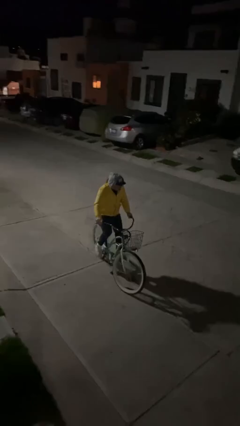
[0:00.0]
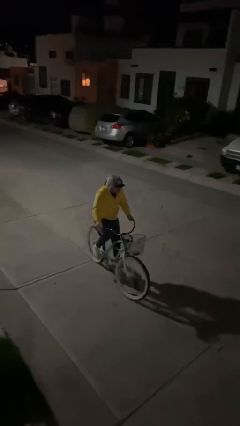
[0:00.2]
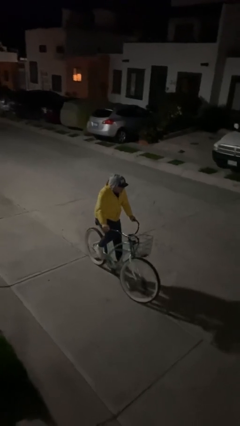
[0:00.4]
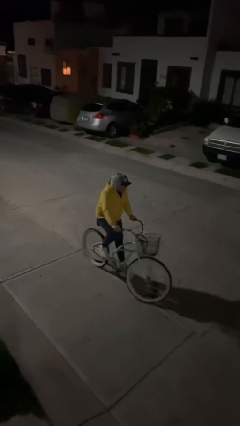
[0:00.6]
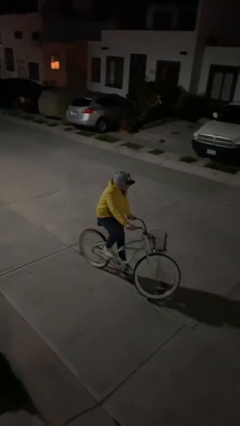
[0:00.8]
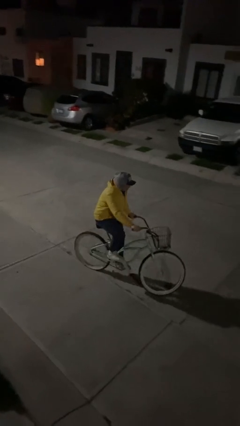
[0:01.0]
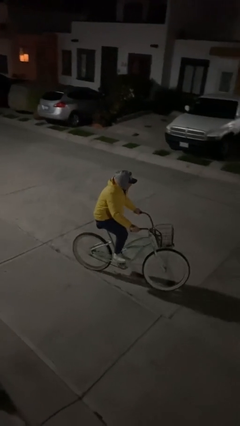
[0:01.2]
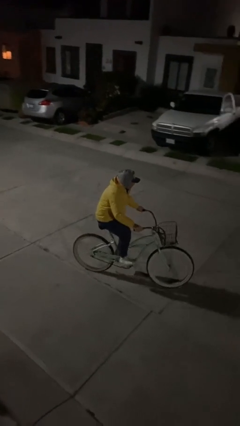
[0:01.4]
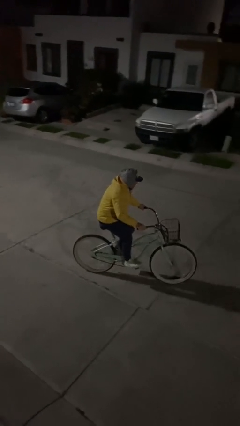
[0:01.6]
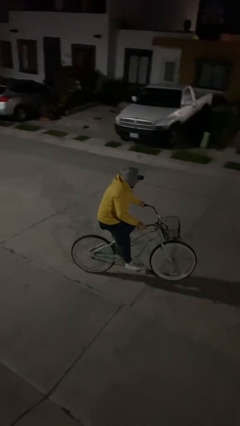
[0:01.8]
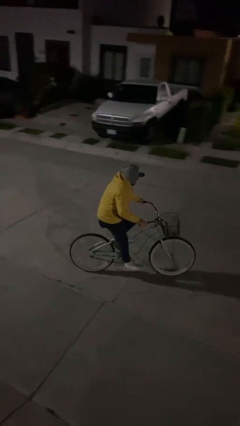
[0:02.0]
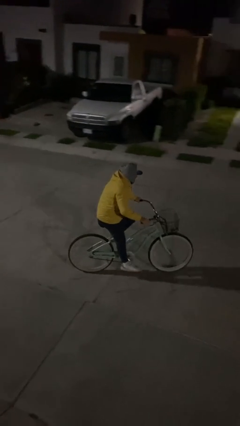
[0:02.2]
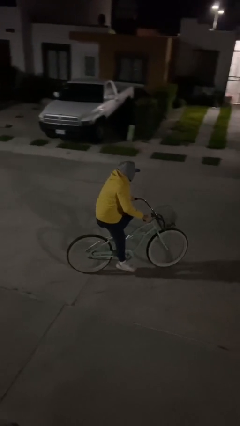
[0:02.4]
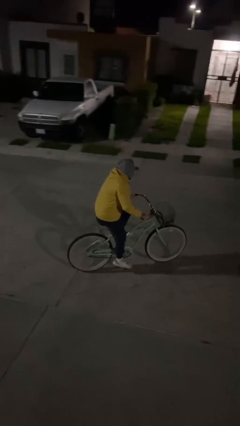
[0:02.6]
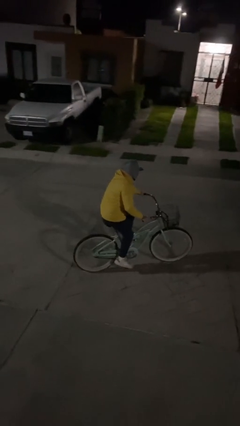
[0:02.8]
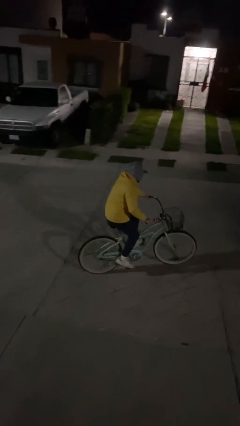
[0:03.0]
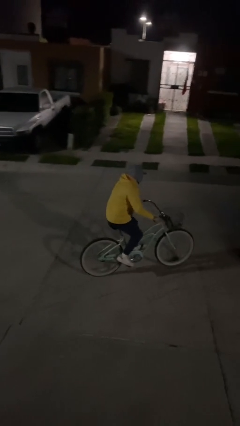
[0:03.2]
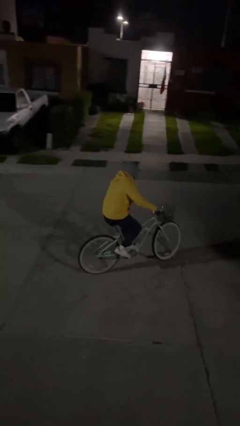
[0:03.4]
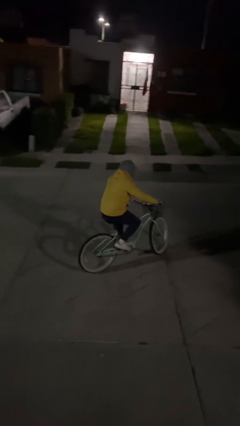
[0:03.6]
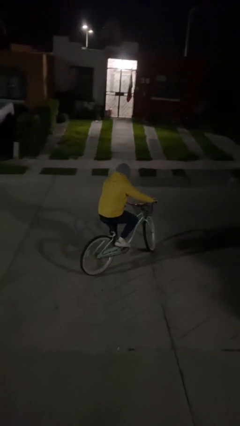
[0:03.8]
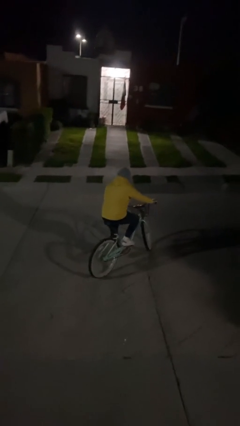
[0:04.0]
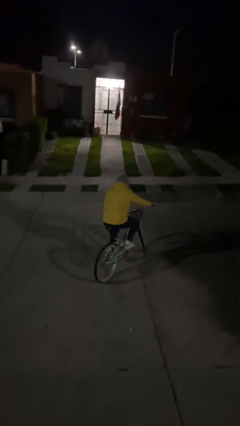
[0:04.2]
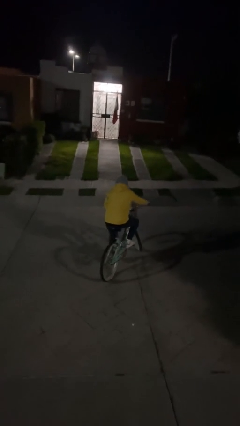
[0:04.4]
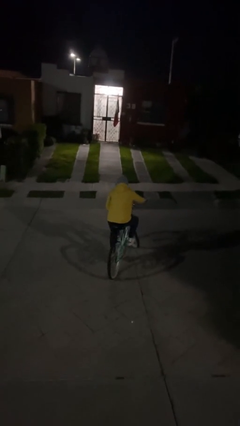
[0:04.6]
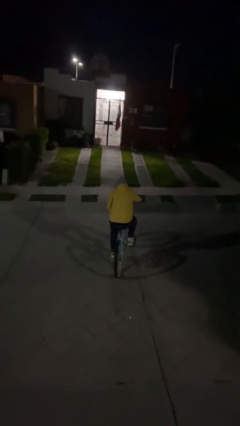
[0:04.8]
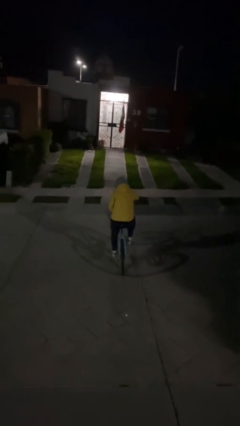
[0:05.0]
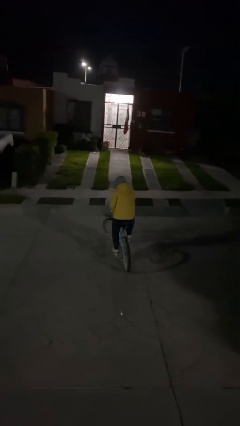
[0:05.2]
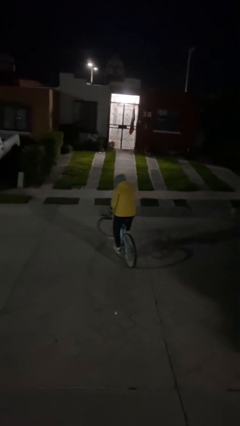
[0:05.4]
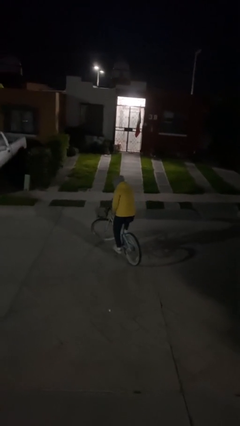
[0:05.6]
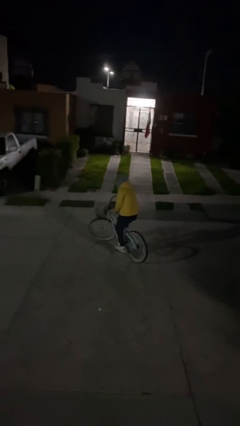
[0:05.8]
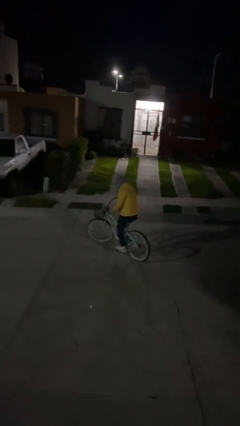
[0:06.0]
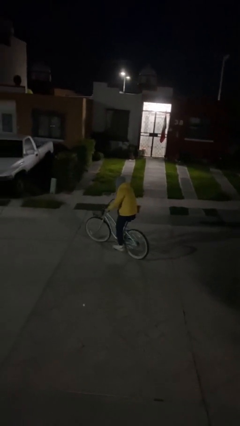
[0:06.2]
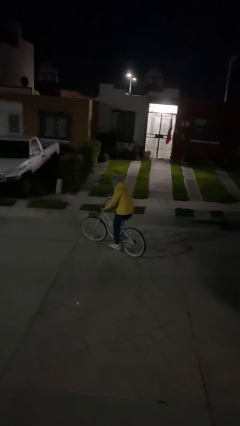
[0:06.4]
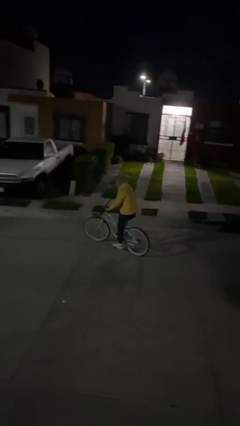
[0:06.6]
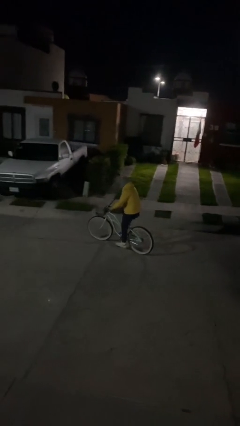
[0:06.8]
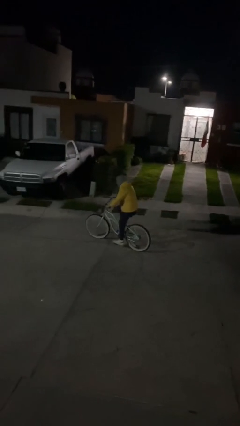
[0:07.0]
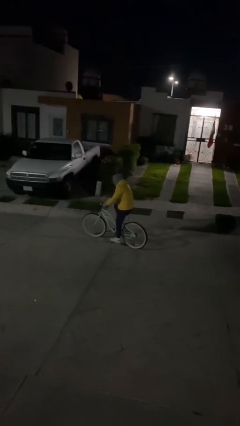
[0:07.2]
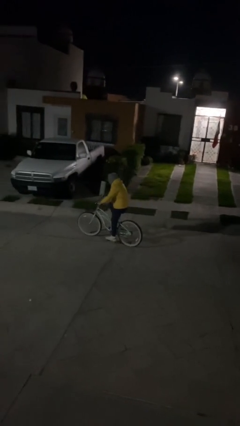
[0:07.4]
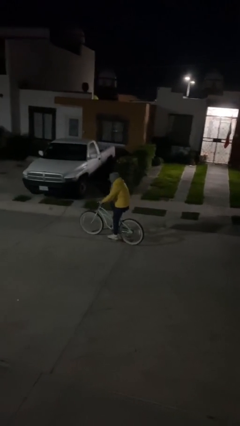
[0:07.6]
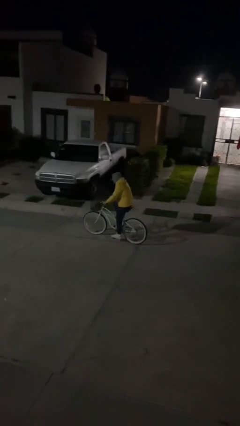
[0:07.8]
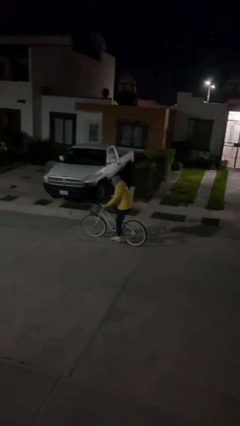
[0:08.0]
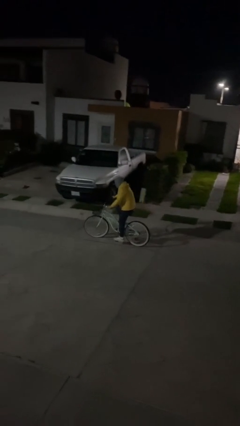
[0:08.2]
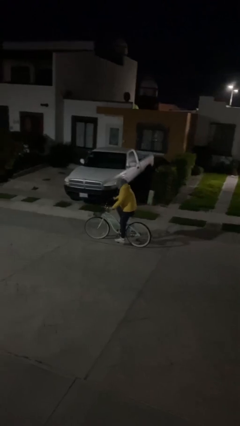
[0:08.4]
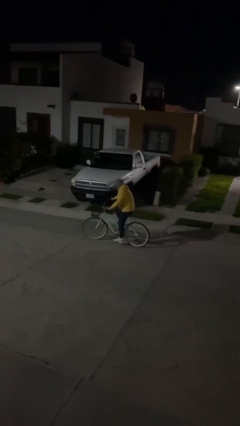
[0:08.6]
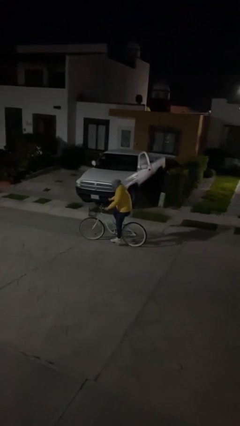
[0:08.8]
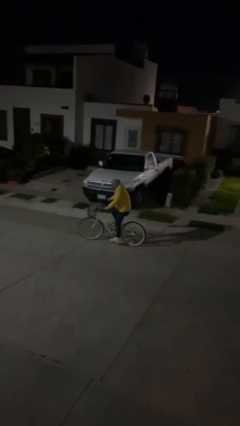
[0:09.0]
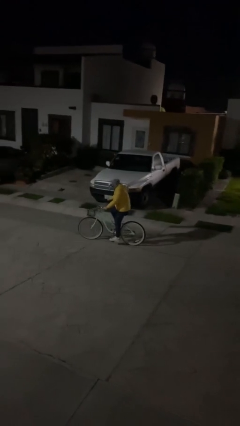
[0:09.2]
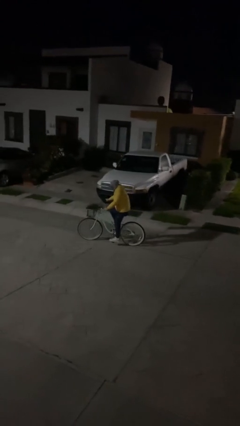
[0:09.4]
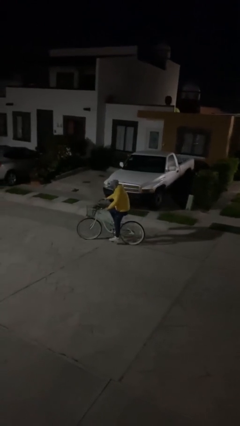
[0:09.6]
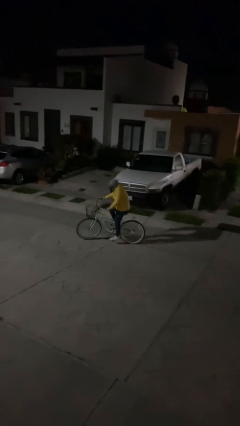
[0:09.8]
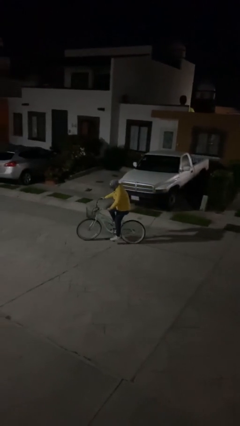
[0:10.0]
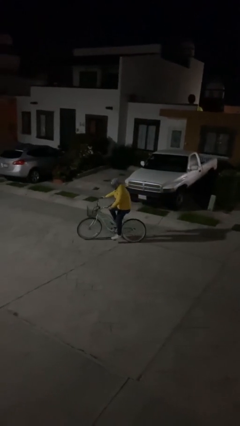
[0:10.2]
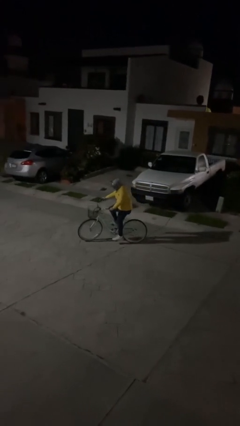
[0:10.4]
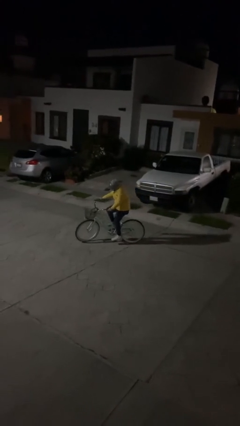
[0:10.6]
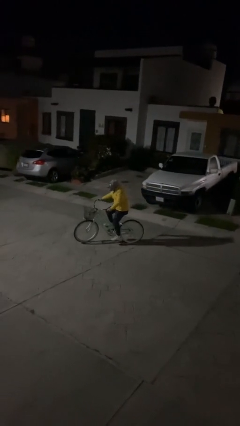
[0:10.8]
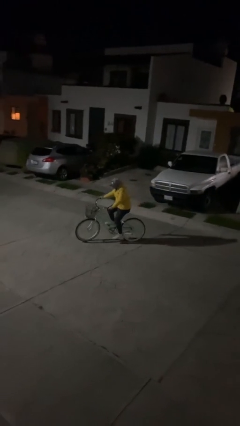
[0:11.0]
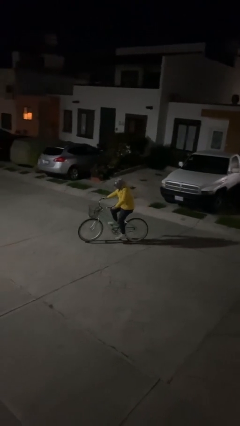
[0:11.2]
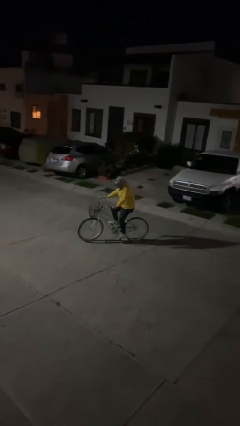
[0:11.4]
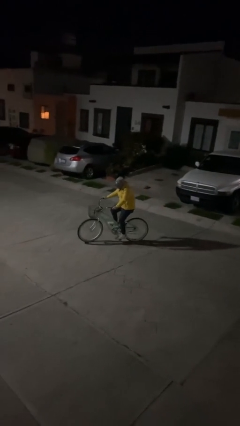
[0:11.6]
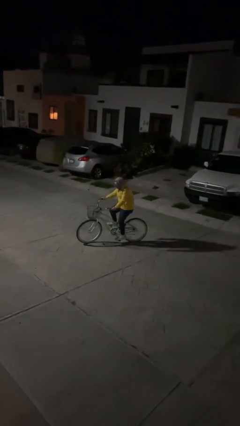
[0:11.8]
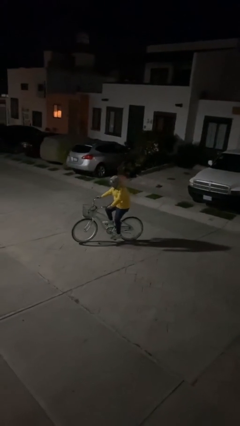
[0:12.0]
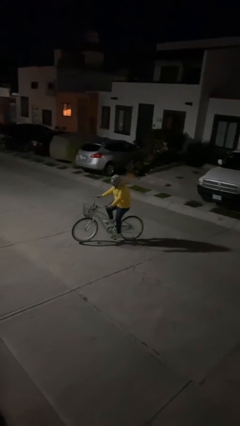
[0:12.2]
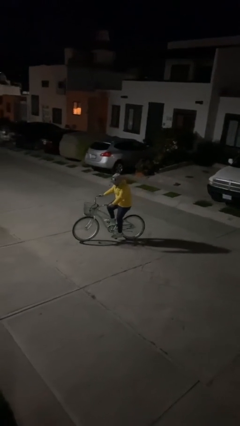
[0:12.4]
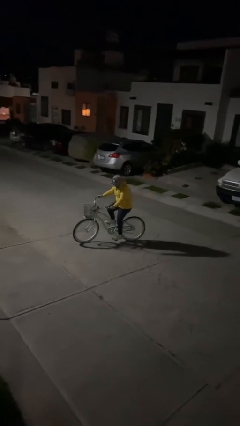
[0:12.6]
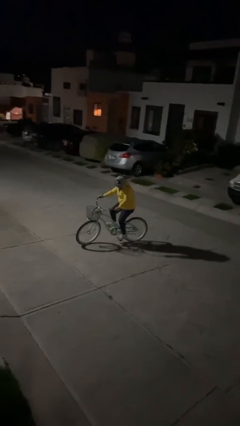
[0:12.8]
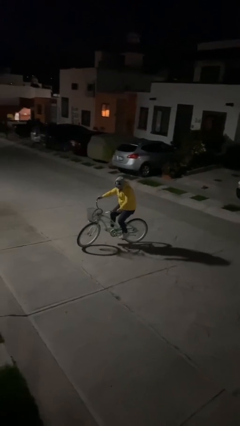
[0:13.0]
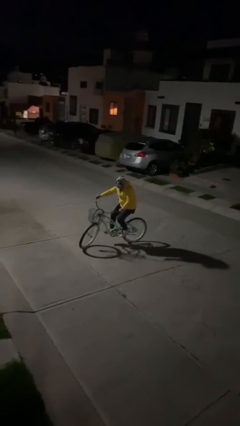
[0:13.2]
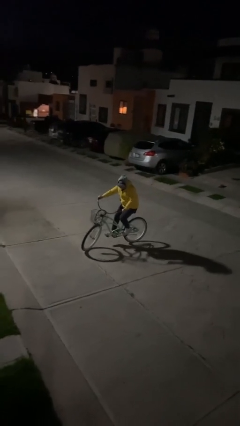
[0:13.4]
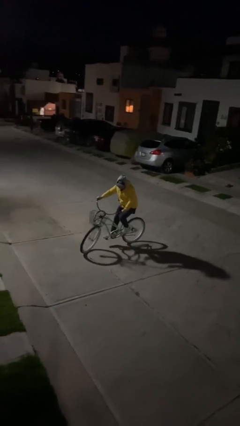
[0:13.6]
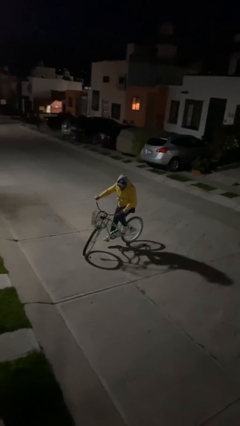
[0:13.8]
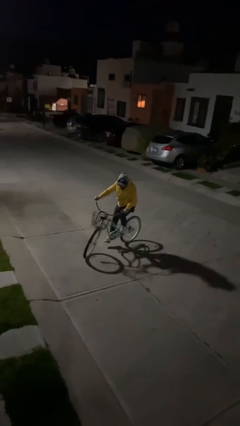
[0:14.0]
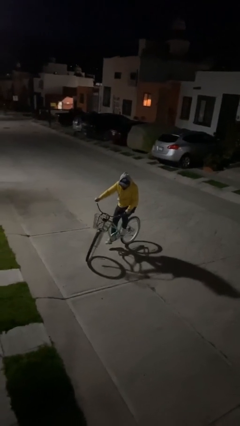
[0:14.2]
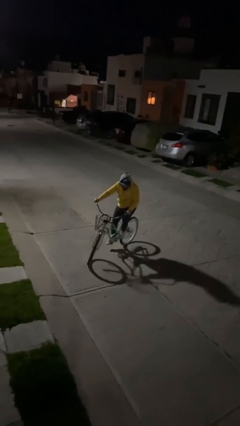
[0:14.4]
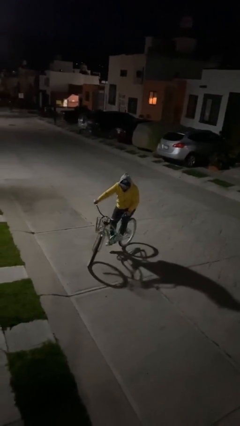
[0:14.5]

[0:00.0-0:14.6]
person rides bicycle

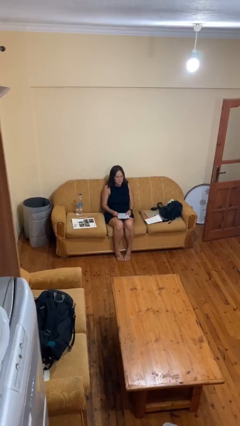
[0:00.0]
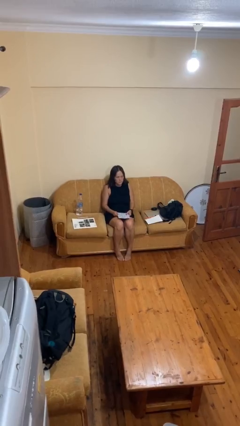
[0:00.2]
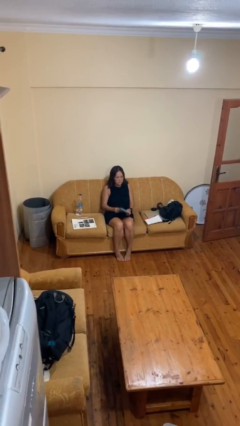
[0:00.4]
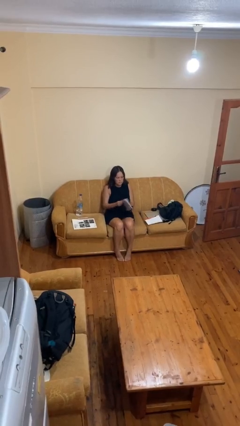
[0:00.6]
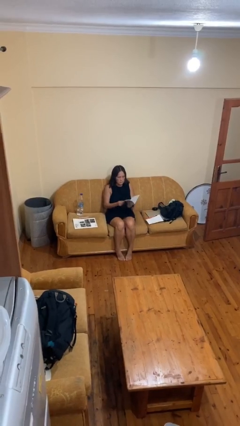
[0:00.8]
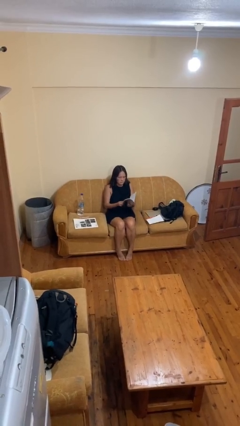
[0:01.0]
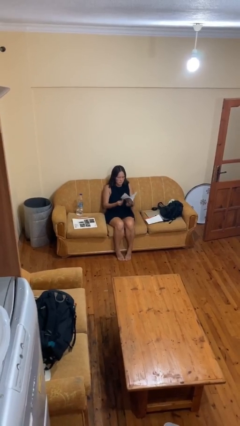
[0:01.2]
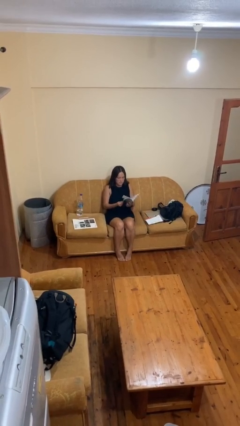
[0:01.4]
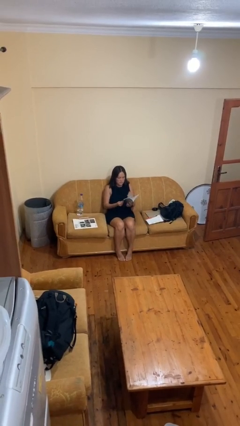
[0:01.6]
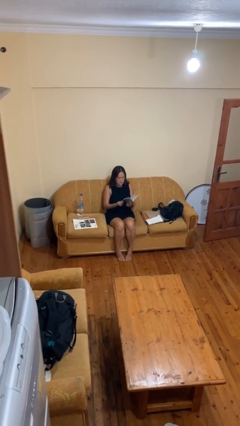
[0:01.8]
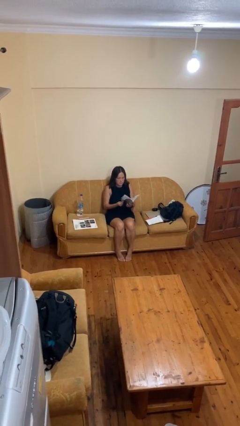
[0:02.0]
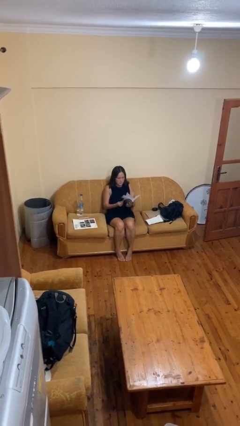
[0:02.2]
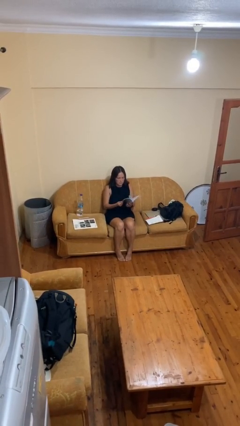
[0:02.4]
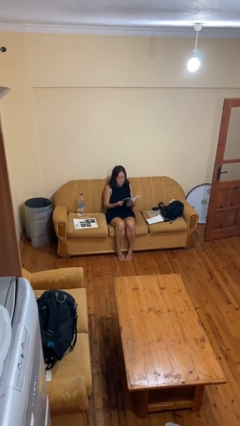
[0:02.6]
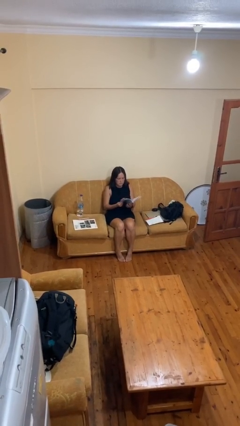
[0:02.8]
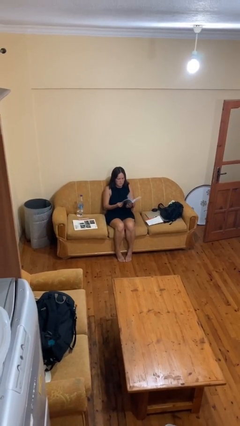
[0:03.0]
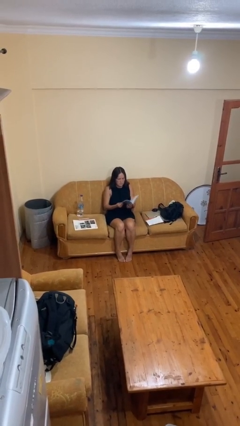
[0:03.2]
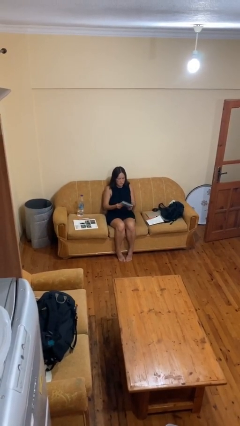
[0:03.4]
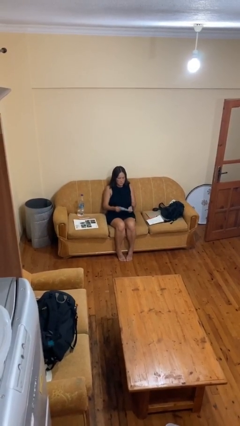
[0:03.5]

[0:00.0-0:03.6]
person reads book
